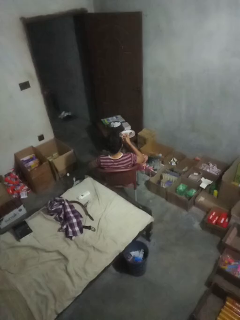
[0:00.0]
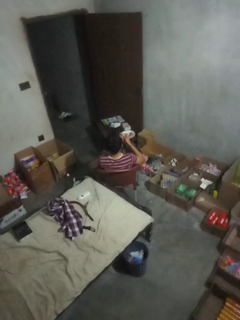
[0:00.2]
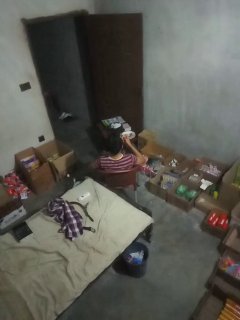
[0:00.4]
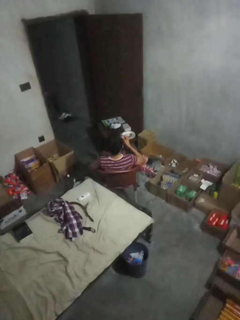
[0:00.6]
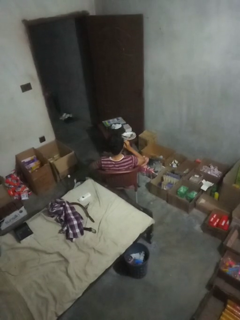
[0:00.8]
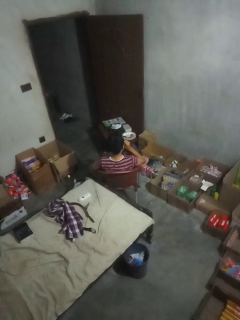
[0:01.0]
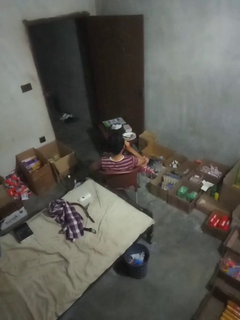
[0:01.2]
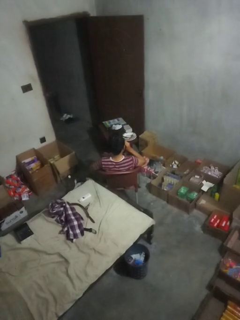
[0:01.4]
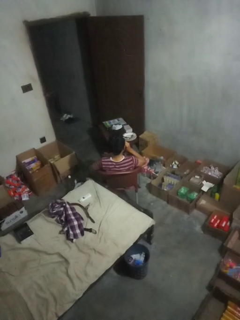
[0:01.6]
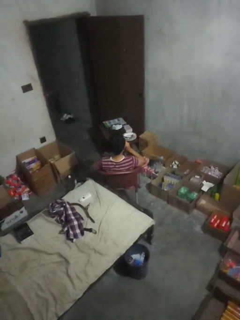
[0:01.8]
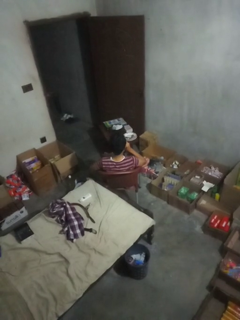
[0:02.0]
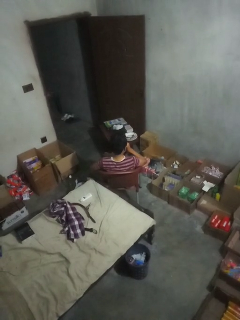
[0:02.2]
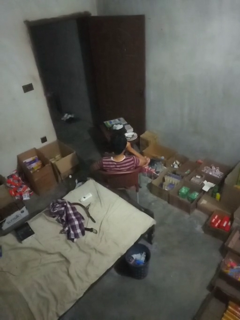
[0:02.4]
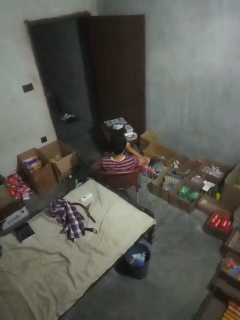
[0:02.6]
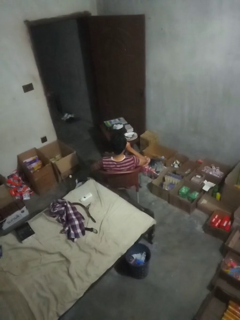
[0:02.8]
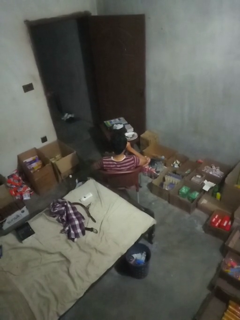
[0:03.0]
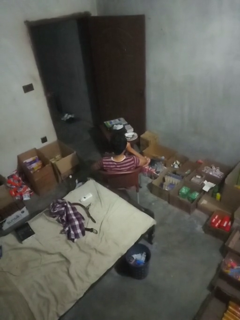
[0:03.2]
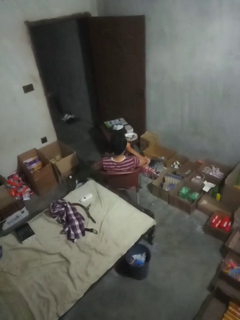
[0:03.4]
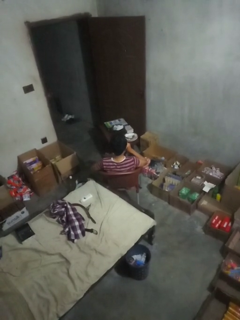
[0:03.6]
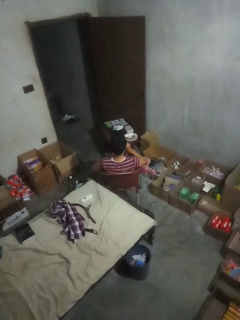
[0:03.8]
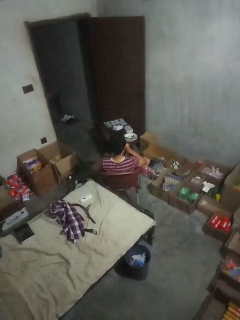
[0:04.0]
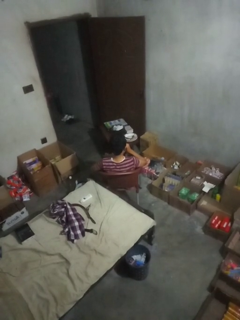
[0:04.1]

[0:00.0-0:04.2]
person flosses

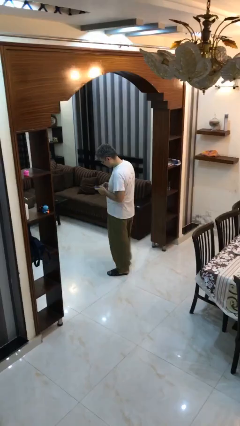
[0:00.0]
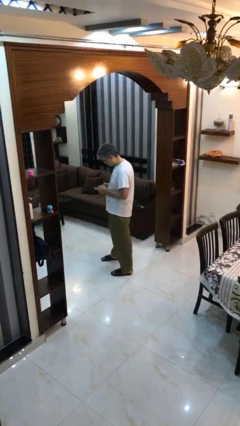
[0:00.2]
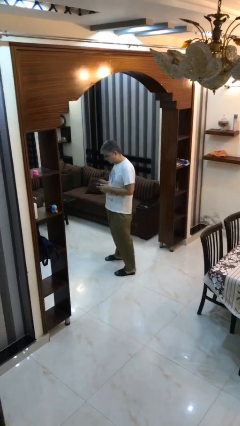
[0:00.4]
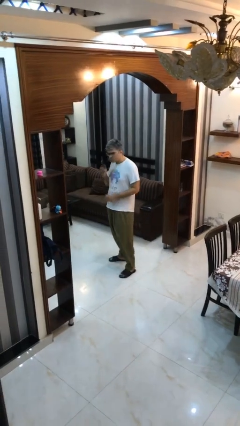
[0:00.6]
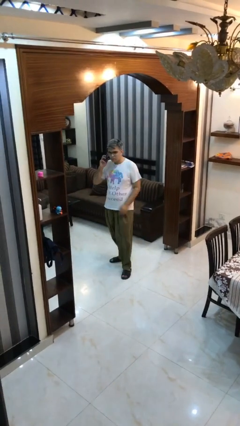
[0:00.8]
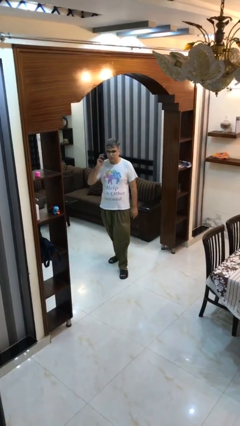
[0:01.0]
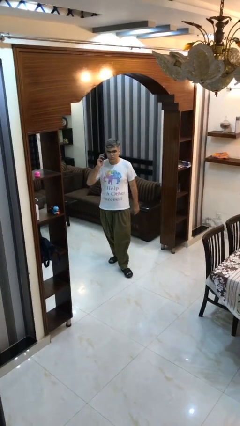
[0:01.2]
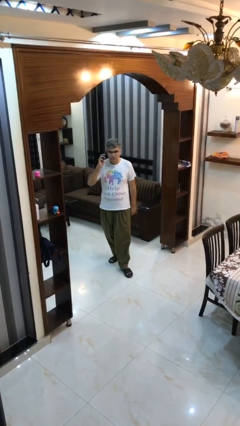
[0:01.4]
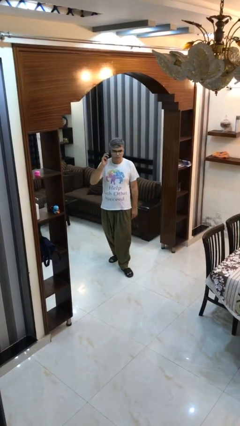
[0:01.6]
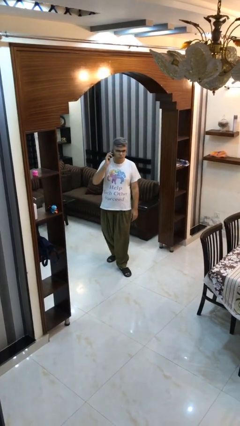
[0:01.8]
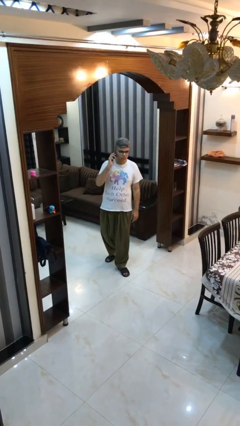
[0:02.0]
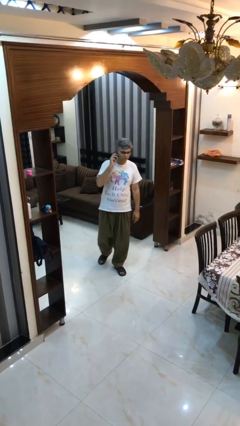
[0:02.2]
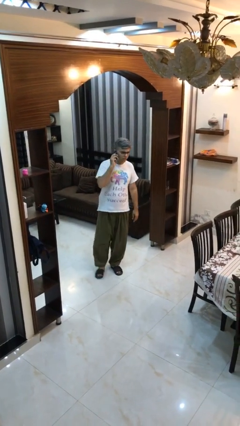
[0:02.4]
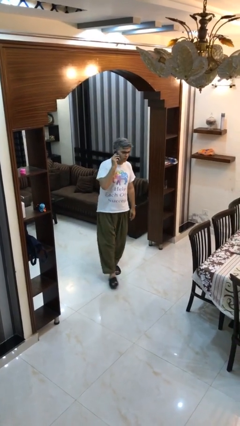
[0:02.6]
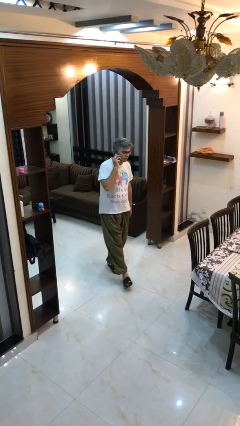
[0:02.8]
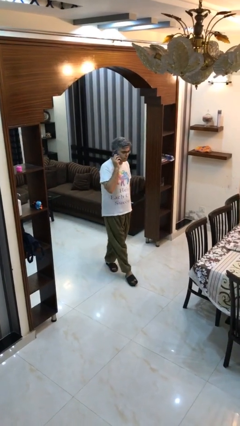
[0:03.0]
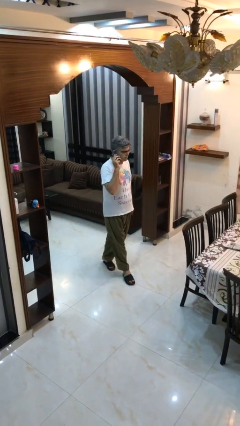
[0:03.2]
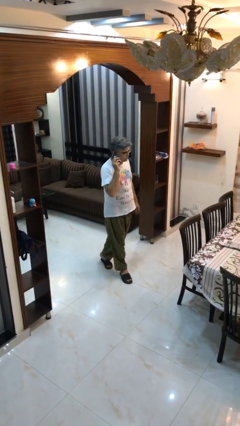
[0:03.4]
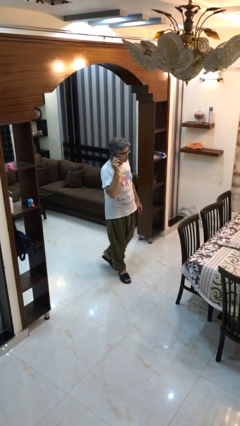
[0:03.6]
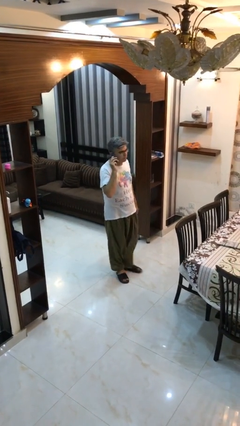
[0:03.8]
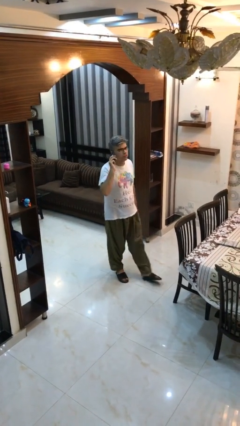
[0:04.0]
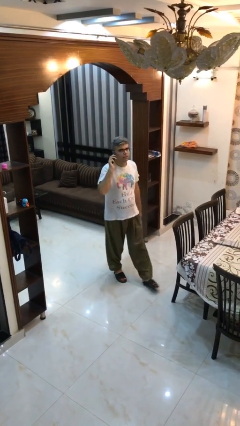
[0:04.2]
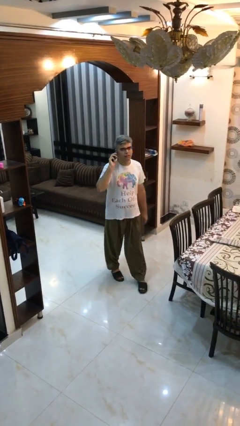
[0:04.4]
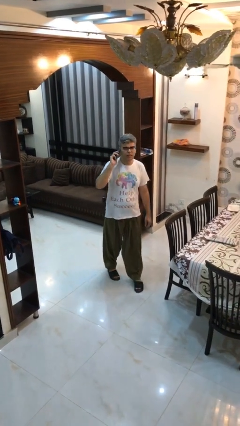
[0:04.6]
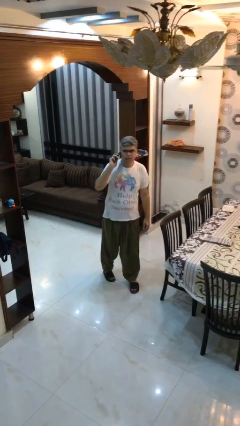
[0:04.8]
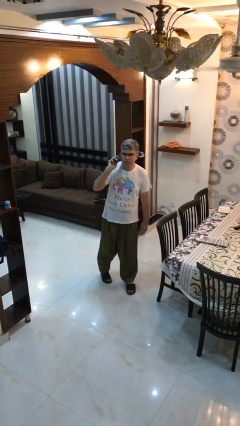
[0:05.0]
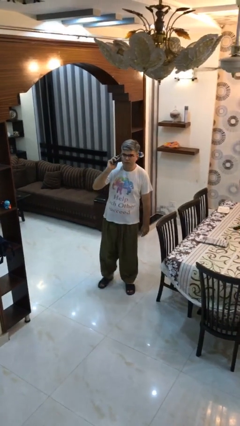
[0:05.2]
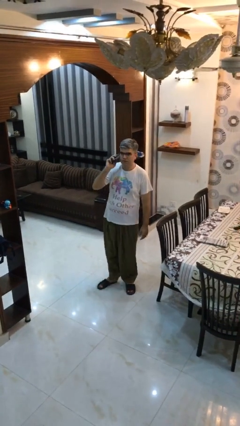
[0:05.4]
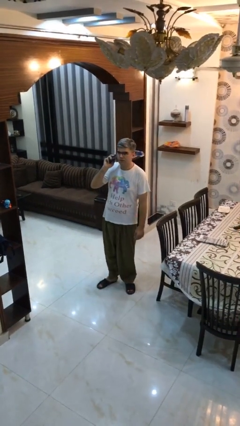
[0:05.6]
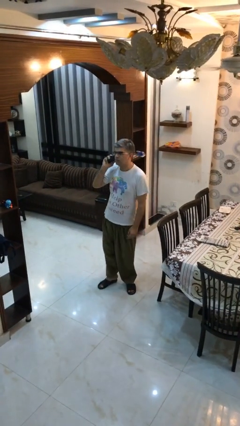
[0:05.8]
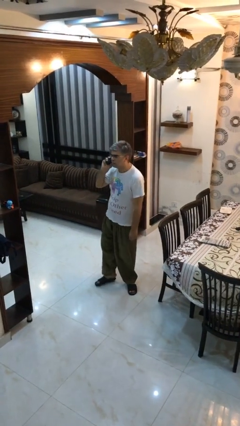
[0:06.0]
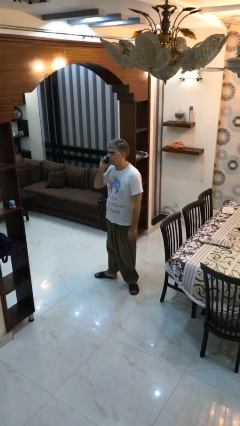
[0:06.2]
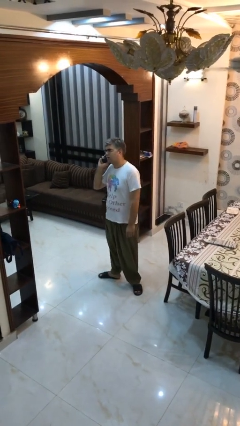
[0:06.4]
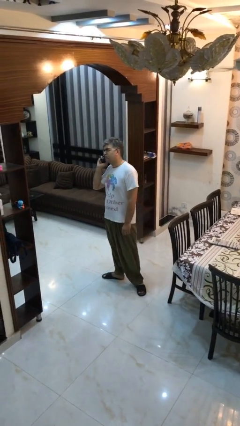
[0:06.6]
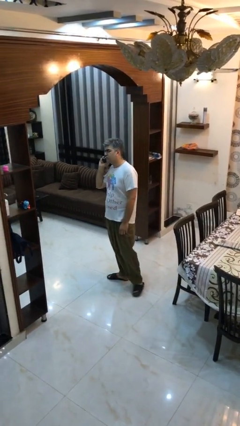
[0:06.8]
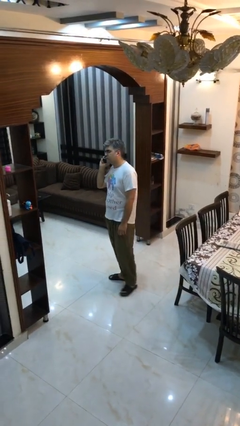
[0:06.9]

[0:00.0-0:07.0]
person talks on phone

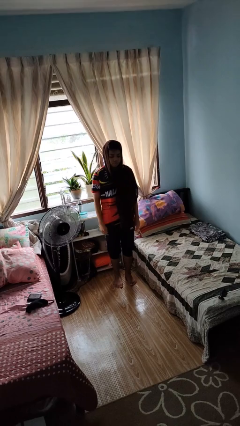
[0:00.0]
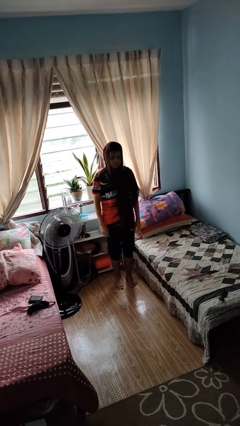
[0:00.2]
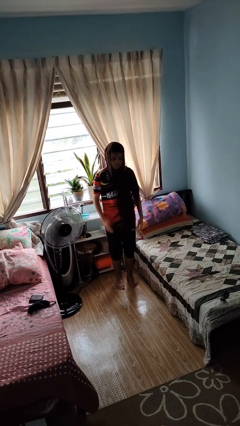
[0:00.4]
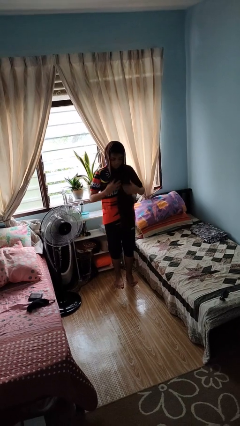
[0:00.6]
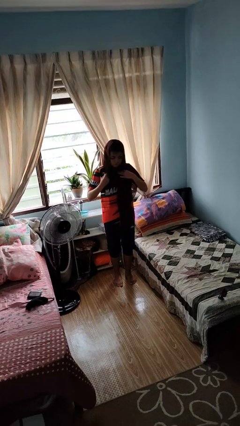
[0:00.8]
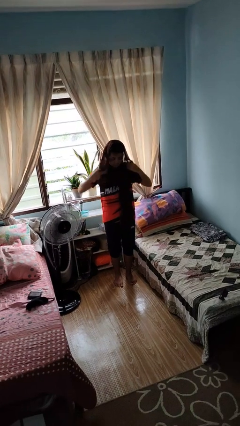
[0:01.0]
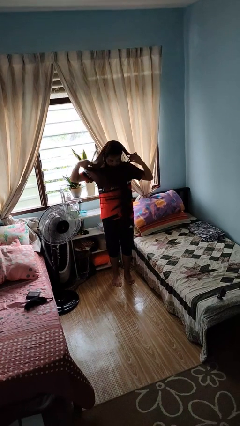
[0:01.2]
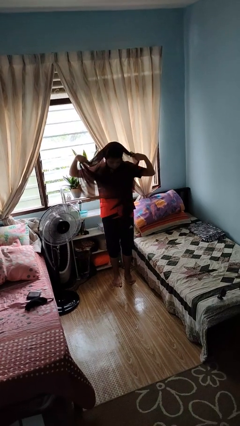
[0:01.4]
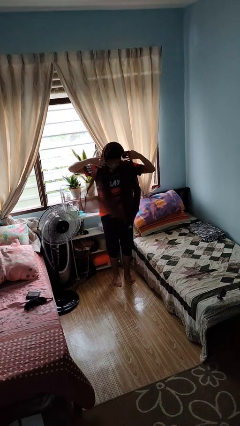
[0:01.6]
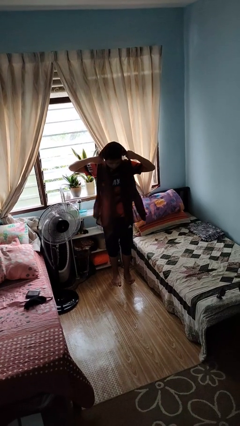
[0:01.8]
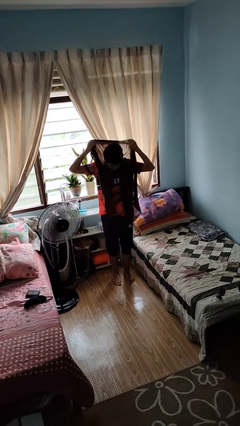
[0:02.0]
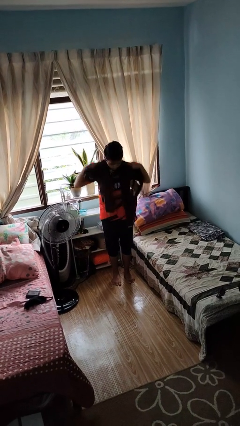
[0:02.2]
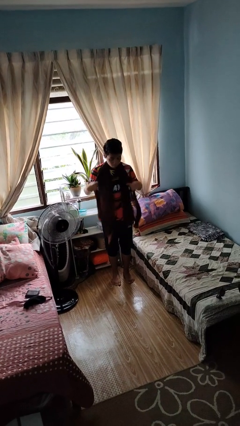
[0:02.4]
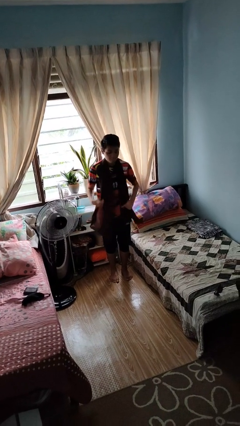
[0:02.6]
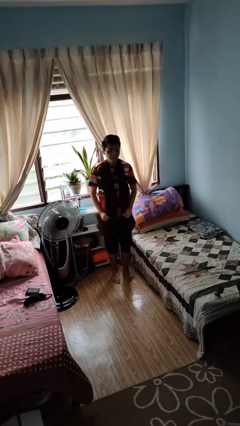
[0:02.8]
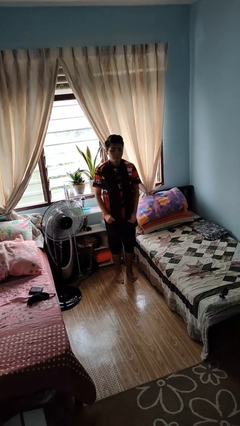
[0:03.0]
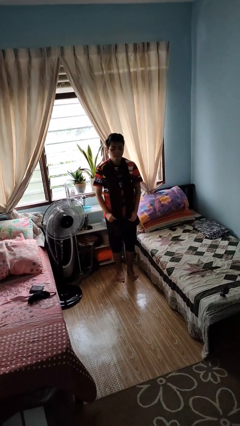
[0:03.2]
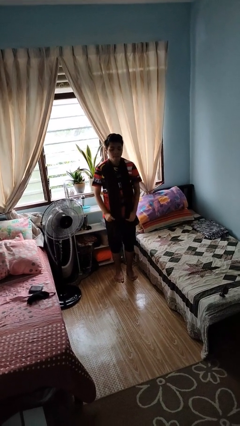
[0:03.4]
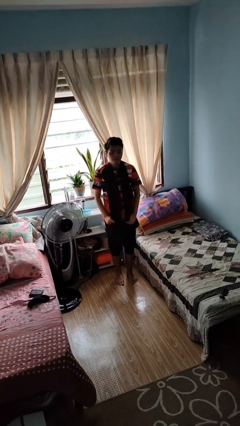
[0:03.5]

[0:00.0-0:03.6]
person takes off scarf

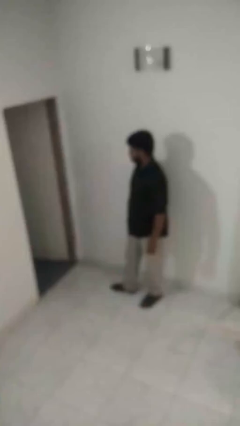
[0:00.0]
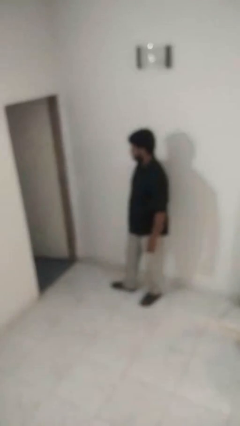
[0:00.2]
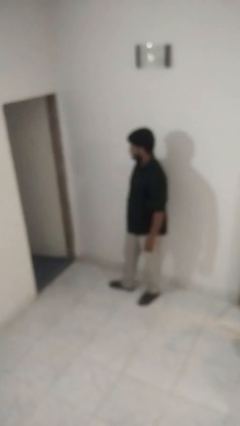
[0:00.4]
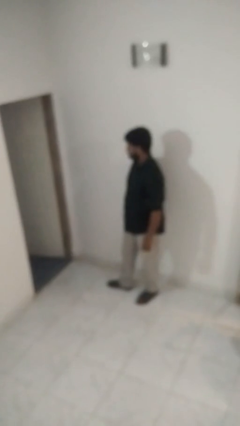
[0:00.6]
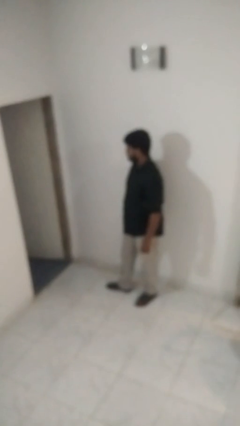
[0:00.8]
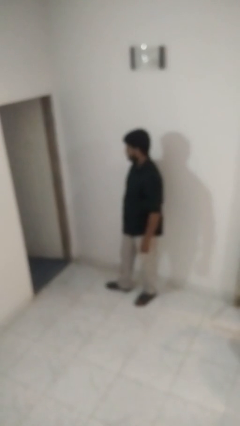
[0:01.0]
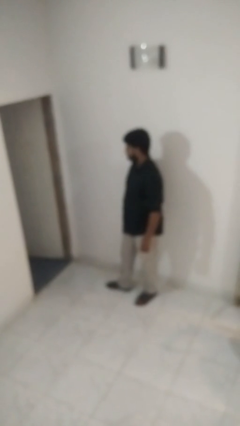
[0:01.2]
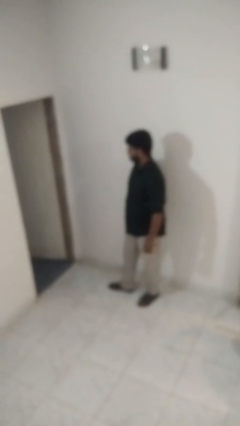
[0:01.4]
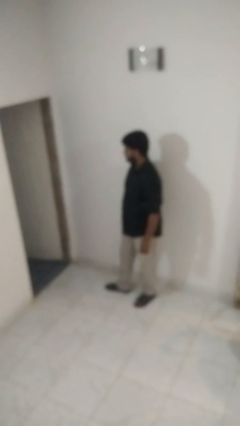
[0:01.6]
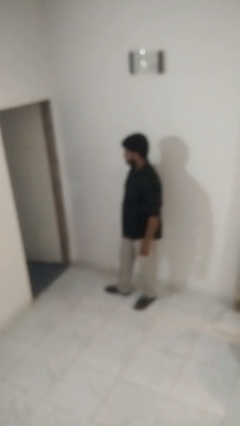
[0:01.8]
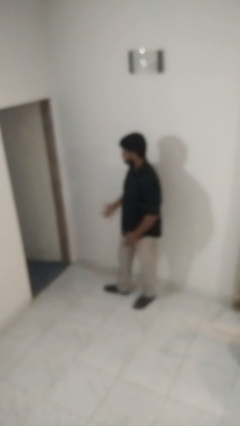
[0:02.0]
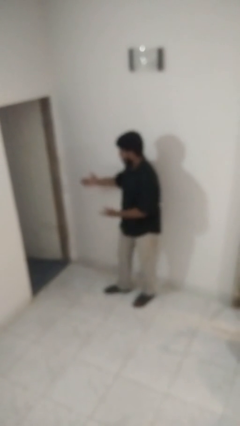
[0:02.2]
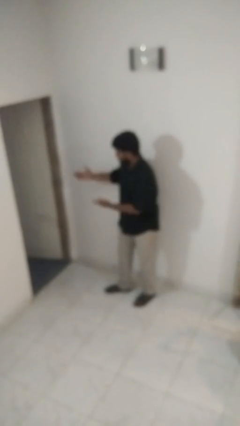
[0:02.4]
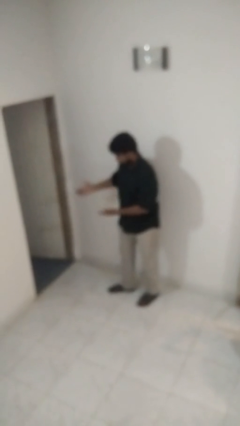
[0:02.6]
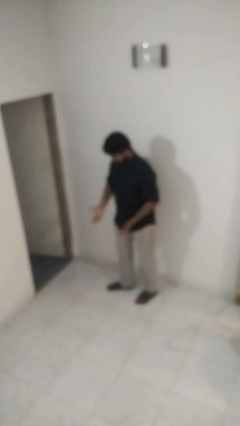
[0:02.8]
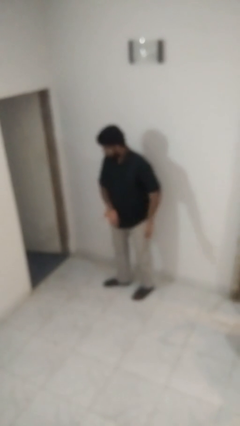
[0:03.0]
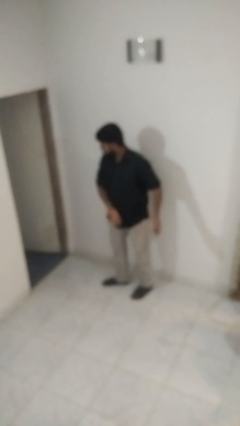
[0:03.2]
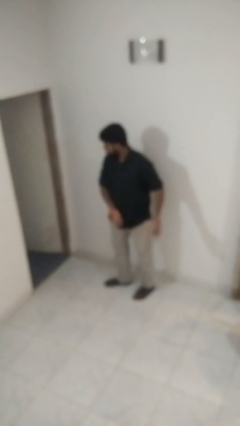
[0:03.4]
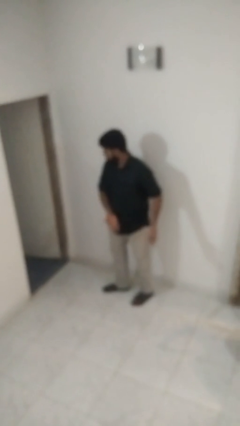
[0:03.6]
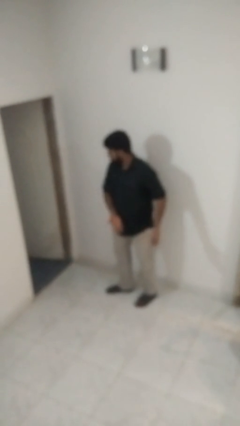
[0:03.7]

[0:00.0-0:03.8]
person gestures come here
